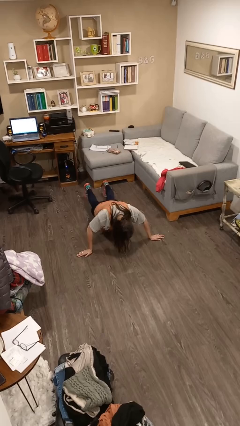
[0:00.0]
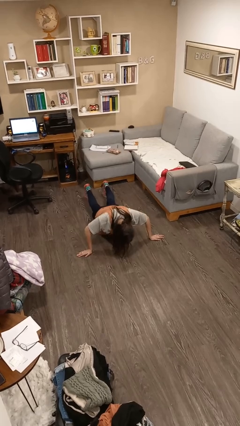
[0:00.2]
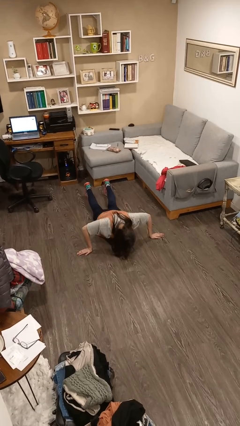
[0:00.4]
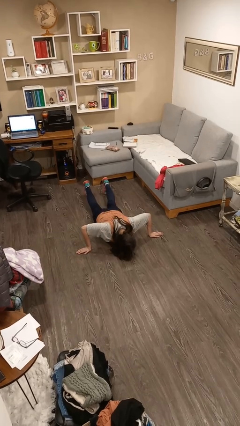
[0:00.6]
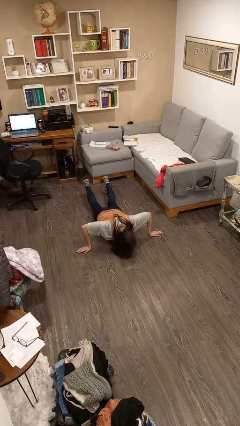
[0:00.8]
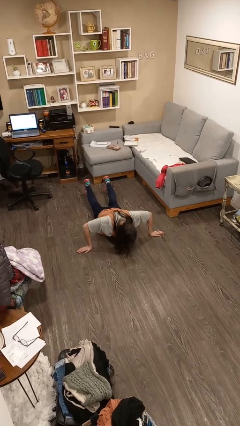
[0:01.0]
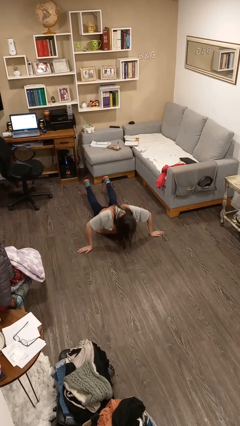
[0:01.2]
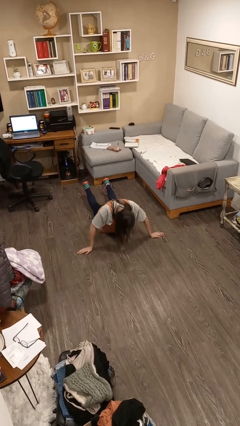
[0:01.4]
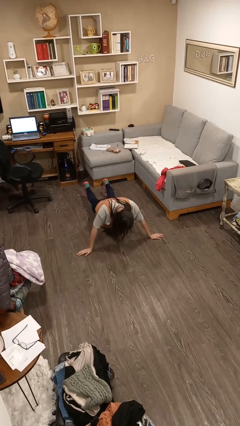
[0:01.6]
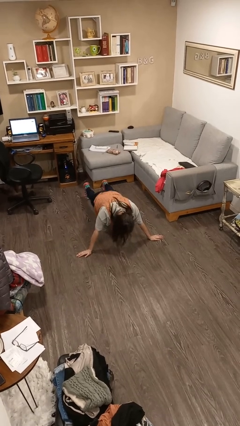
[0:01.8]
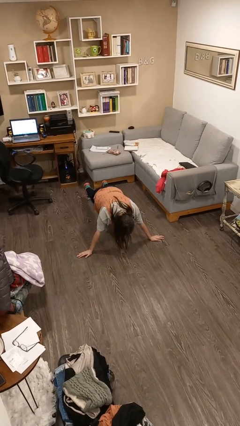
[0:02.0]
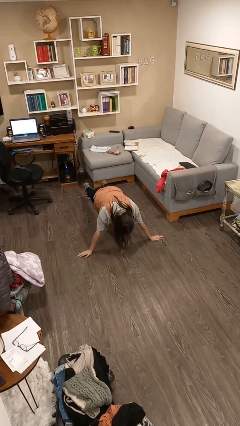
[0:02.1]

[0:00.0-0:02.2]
person exercises with pushup

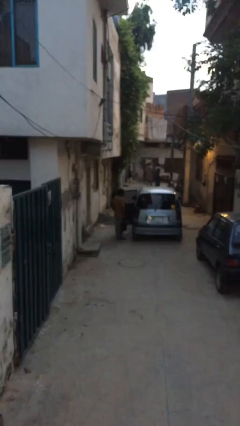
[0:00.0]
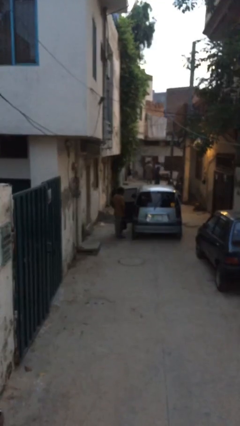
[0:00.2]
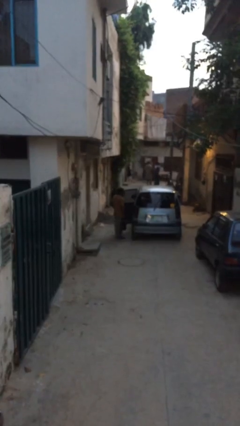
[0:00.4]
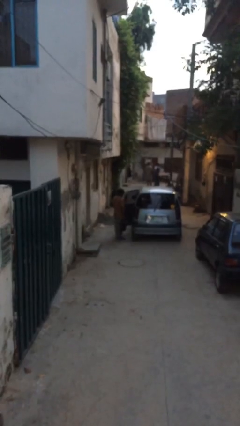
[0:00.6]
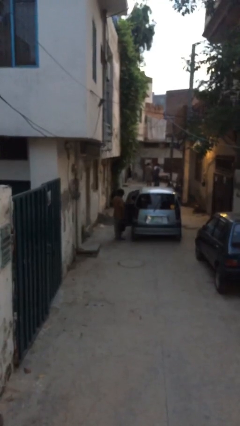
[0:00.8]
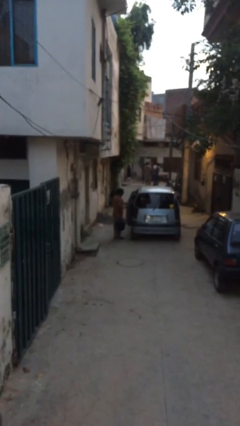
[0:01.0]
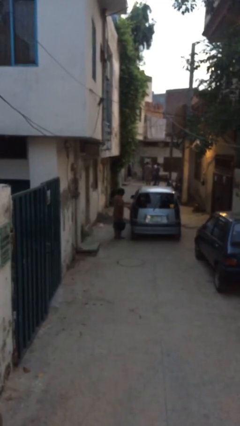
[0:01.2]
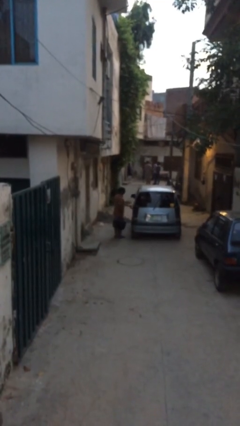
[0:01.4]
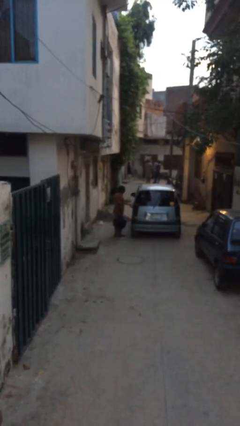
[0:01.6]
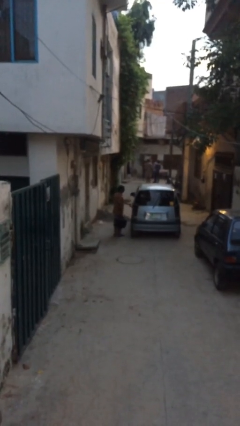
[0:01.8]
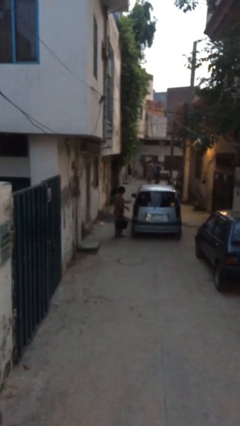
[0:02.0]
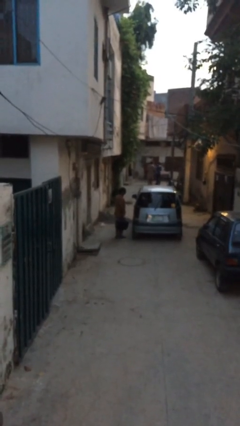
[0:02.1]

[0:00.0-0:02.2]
person closes car door

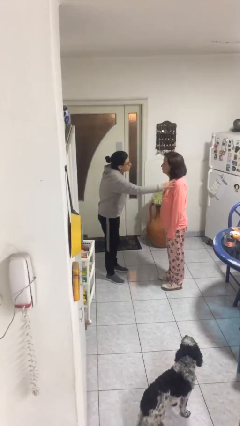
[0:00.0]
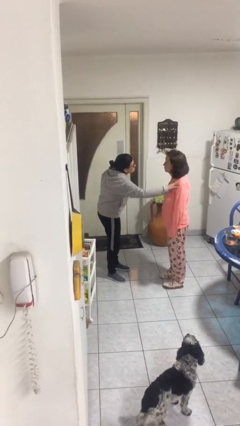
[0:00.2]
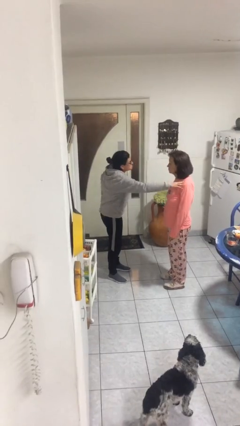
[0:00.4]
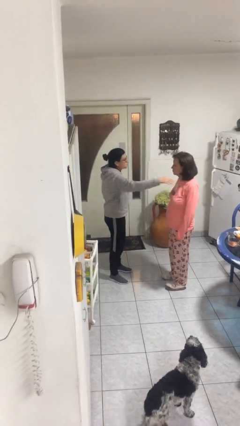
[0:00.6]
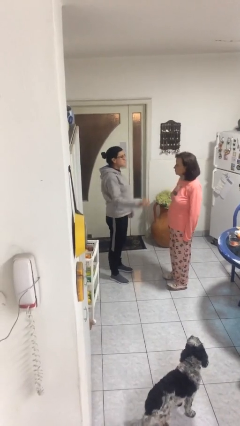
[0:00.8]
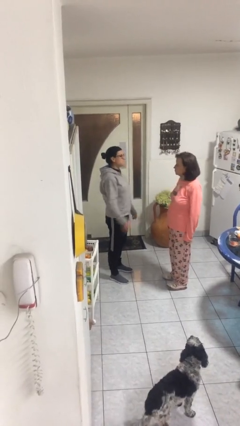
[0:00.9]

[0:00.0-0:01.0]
person shoves person

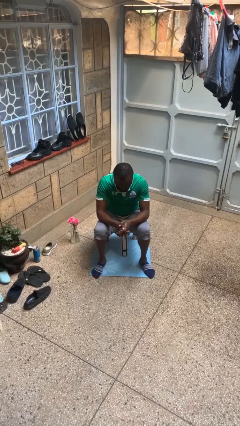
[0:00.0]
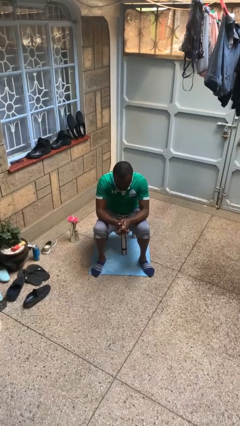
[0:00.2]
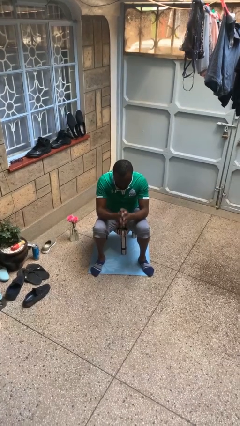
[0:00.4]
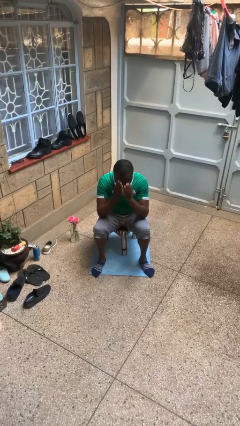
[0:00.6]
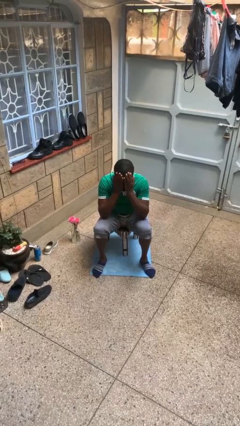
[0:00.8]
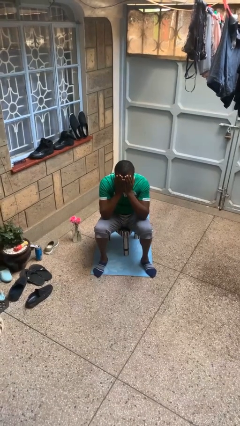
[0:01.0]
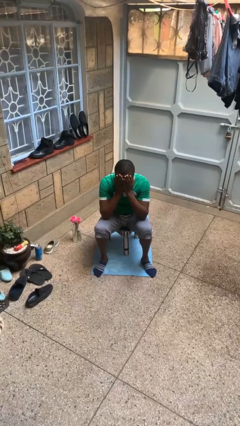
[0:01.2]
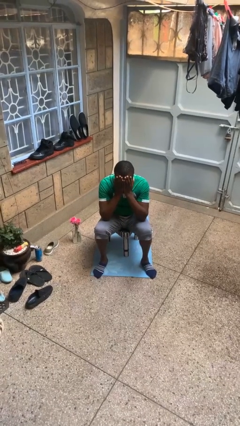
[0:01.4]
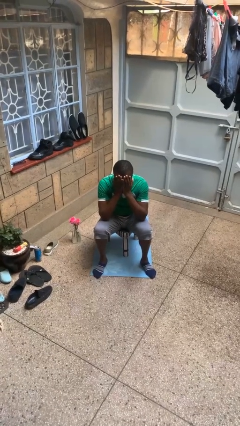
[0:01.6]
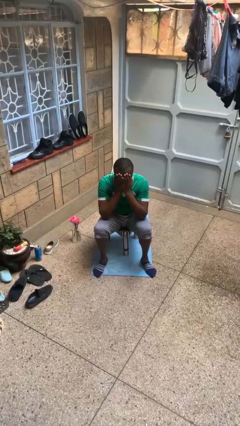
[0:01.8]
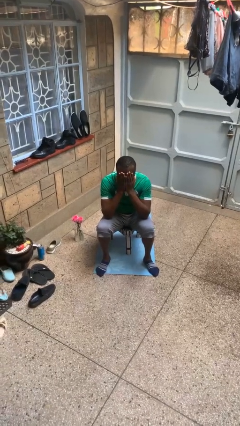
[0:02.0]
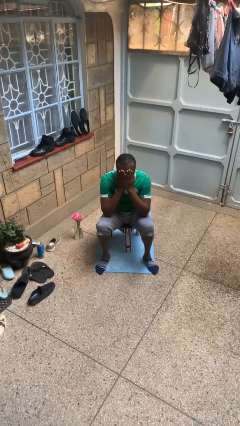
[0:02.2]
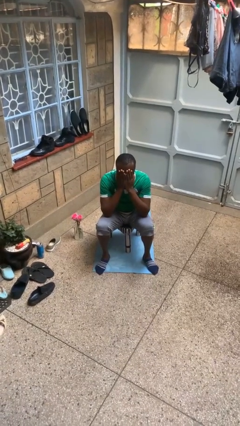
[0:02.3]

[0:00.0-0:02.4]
person covers face with hands

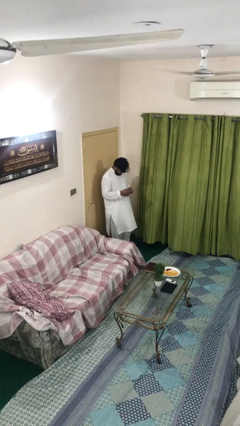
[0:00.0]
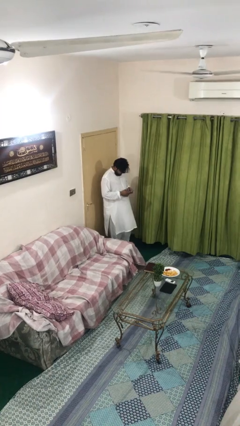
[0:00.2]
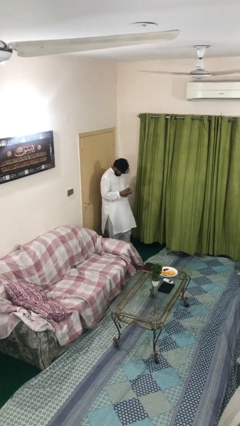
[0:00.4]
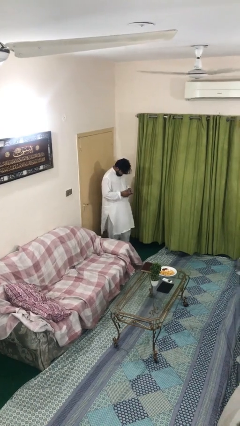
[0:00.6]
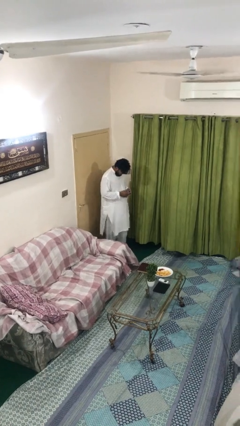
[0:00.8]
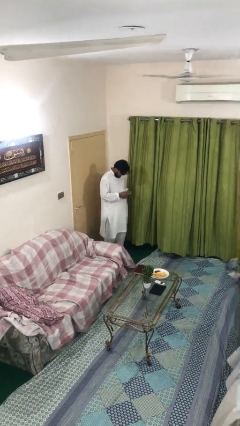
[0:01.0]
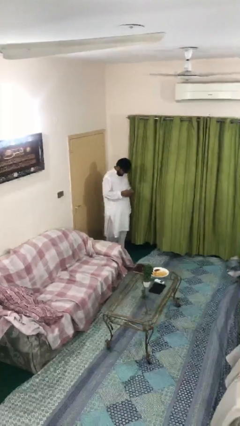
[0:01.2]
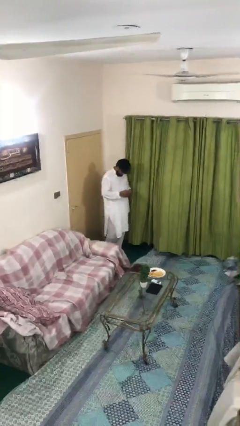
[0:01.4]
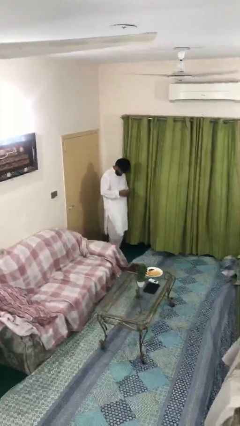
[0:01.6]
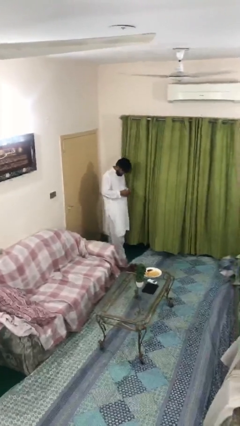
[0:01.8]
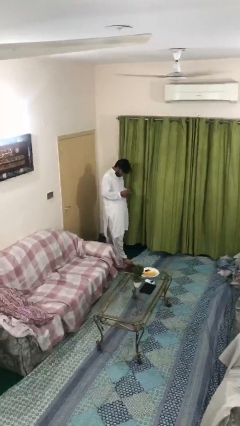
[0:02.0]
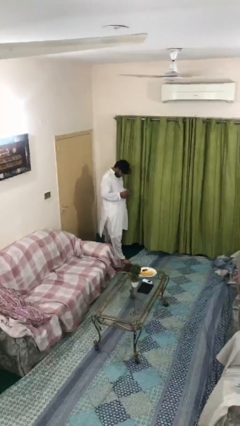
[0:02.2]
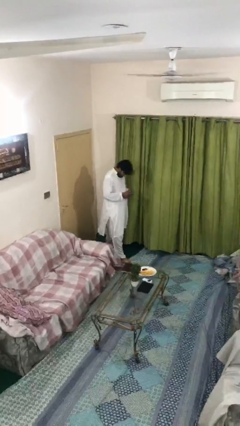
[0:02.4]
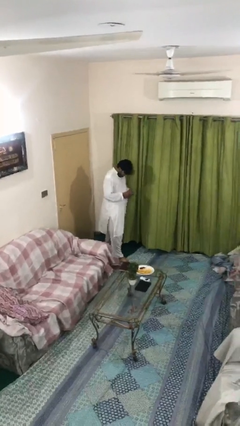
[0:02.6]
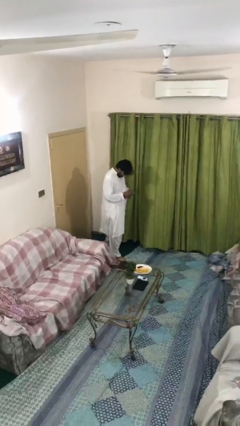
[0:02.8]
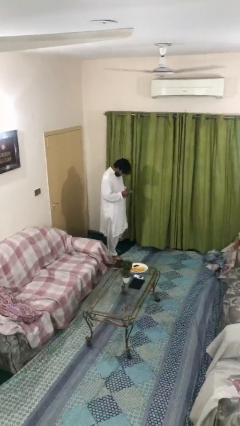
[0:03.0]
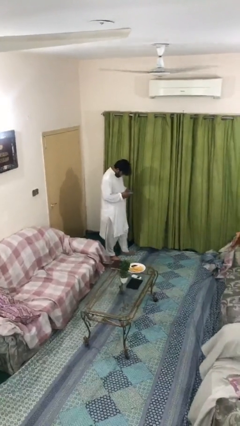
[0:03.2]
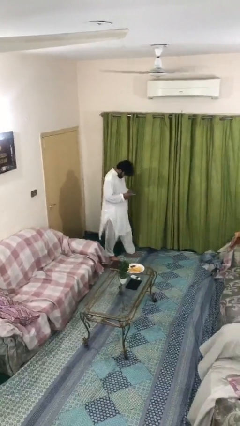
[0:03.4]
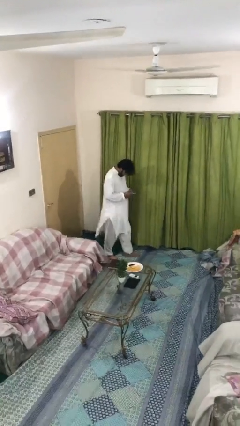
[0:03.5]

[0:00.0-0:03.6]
person texts on phone

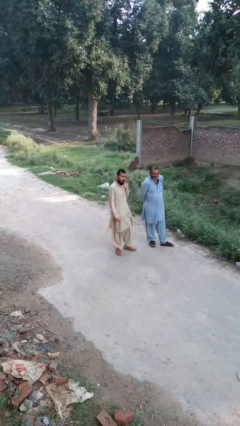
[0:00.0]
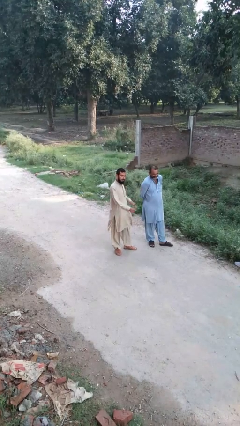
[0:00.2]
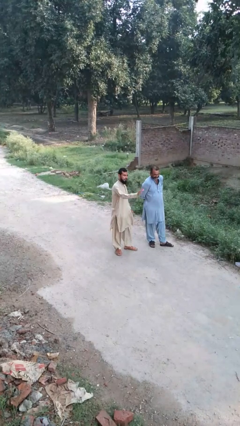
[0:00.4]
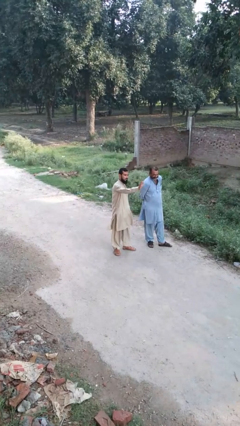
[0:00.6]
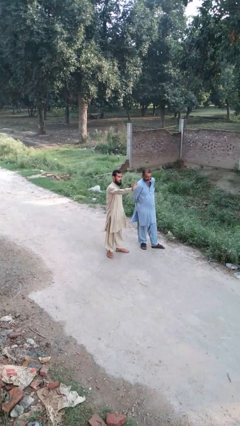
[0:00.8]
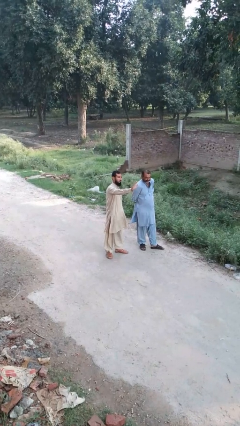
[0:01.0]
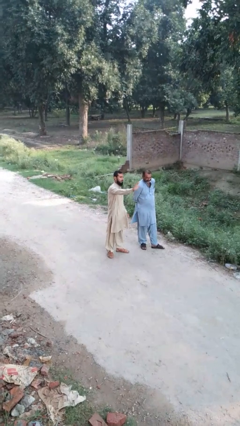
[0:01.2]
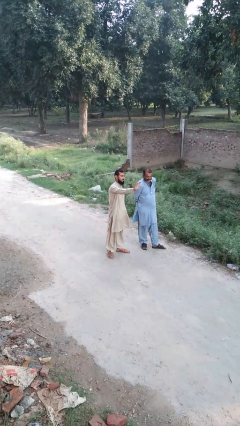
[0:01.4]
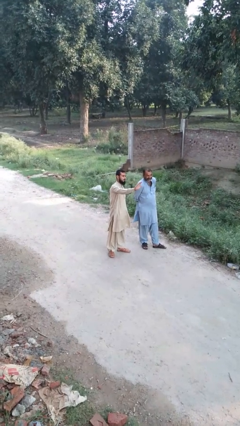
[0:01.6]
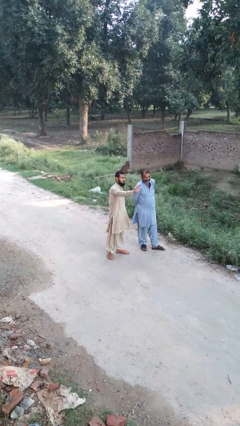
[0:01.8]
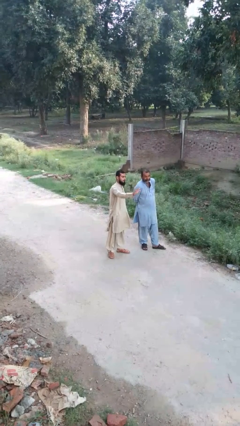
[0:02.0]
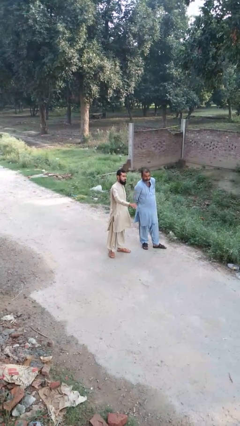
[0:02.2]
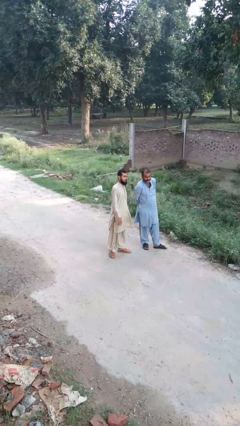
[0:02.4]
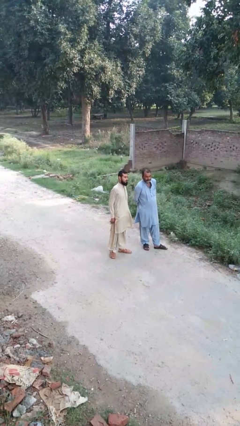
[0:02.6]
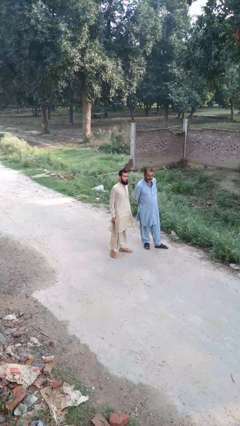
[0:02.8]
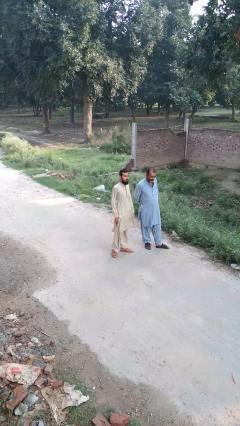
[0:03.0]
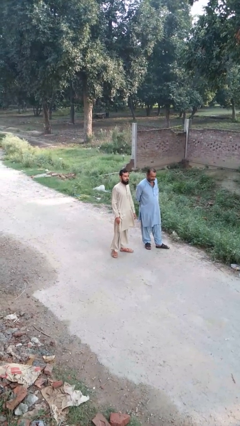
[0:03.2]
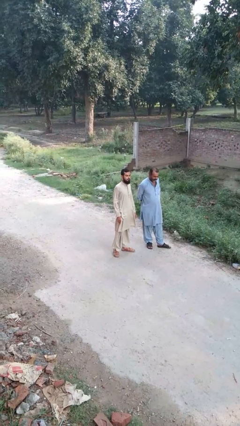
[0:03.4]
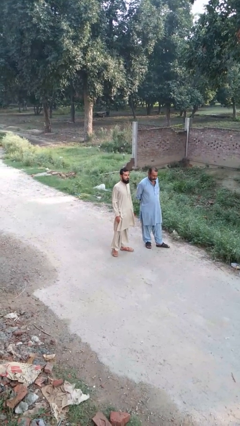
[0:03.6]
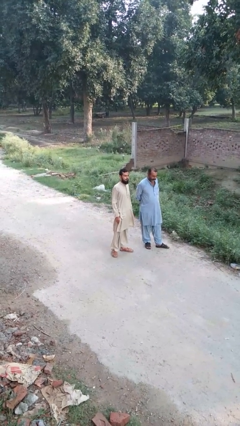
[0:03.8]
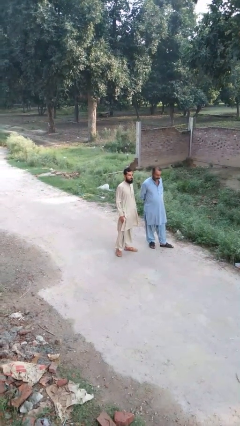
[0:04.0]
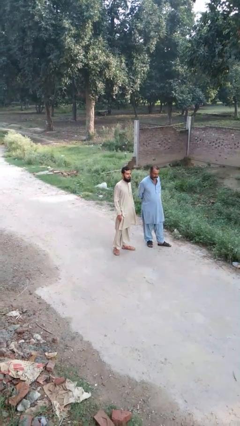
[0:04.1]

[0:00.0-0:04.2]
person waves at person

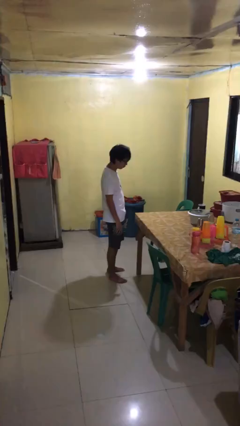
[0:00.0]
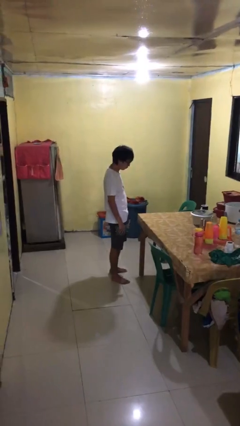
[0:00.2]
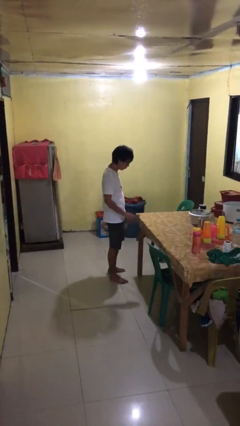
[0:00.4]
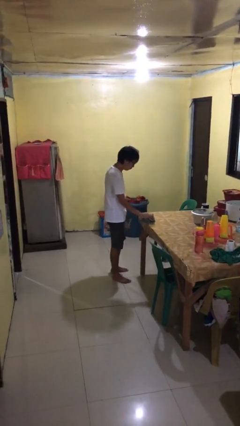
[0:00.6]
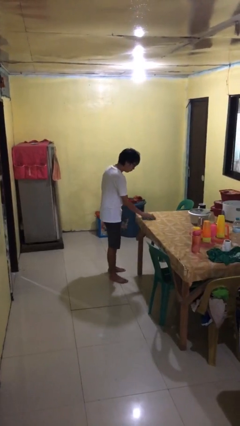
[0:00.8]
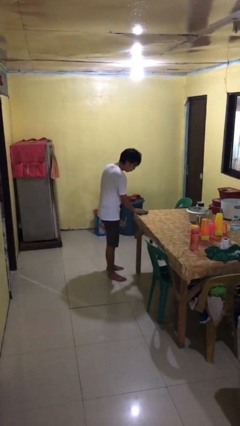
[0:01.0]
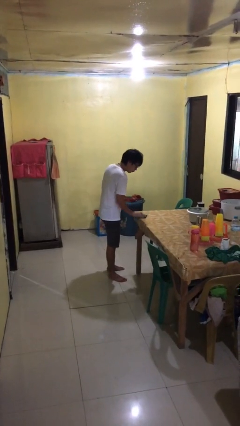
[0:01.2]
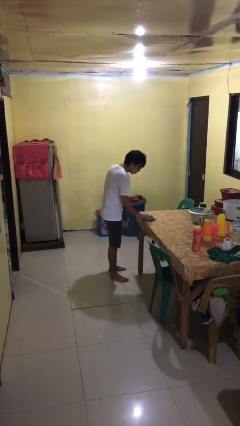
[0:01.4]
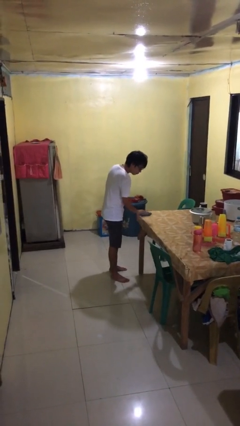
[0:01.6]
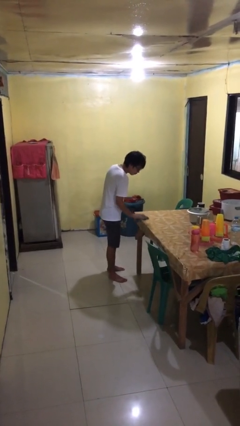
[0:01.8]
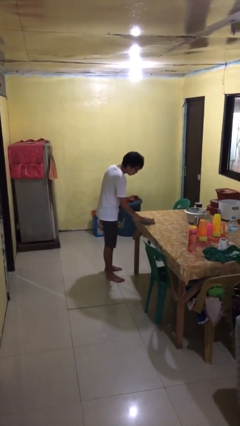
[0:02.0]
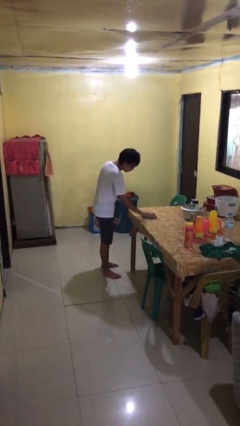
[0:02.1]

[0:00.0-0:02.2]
person cleans table with rag
